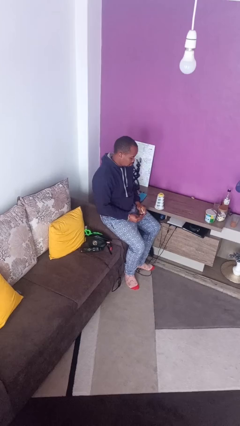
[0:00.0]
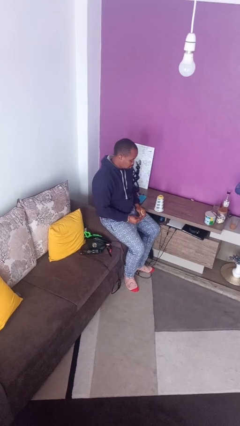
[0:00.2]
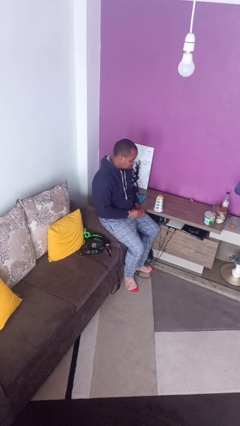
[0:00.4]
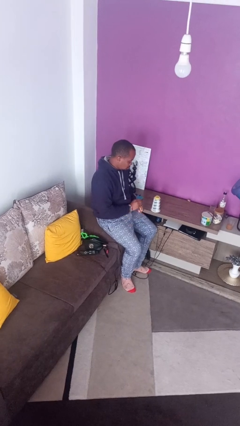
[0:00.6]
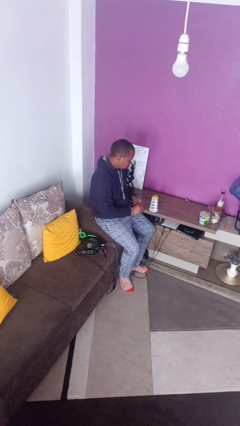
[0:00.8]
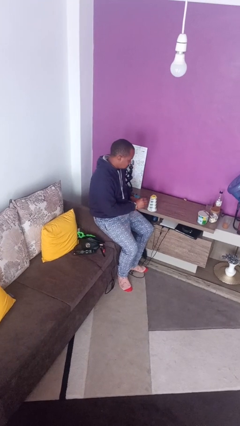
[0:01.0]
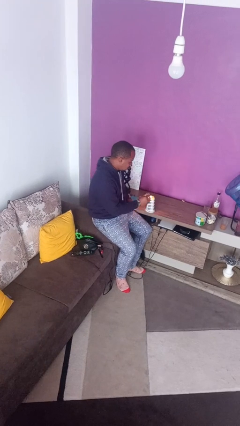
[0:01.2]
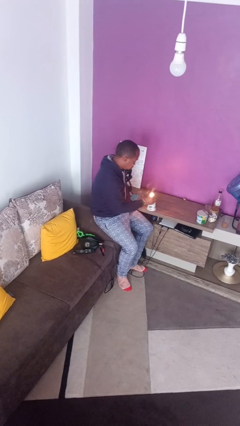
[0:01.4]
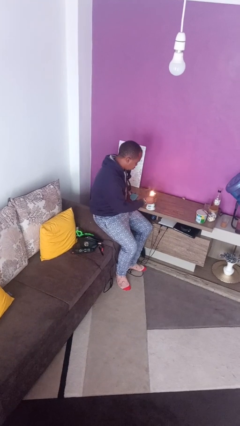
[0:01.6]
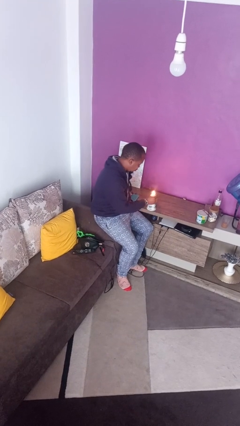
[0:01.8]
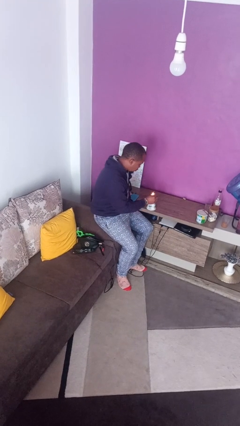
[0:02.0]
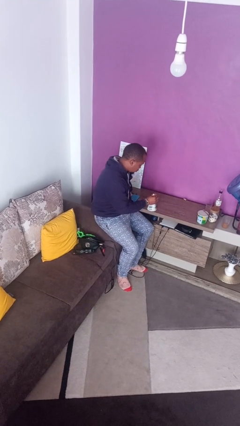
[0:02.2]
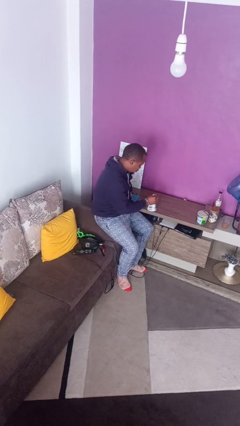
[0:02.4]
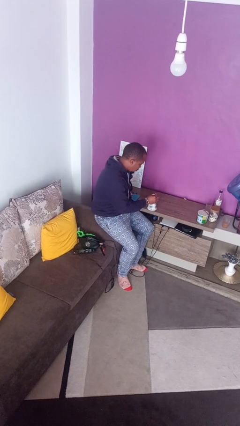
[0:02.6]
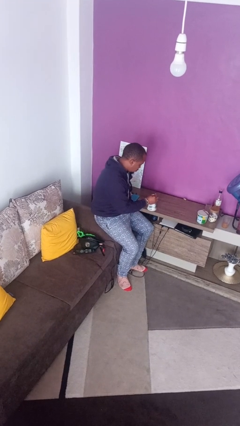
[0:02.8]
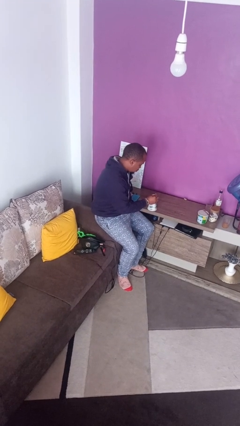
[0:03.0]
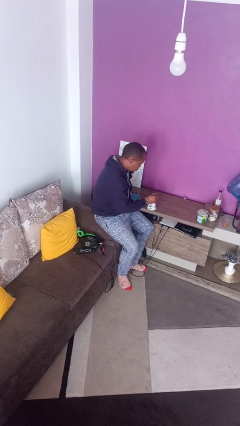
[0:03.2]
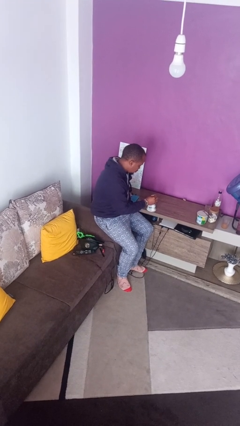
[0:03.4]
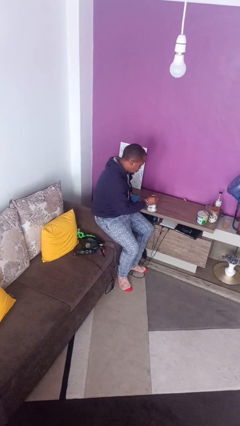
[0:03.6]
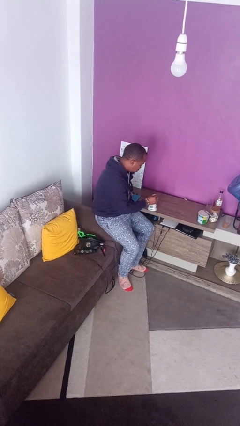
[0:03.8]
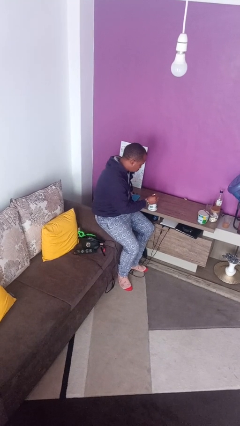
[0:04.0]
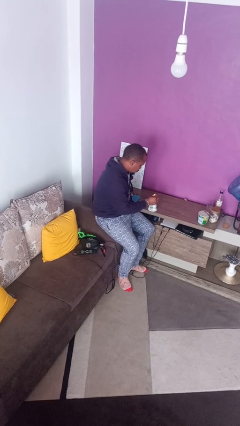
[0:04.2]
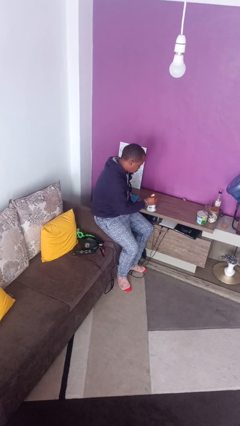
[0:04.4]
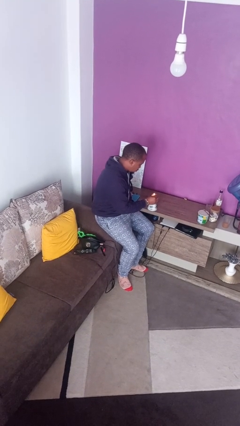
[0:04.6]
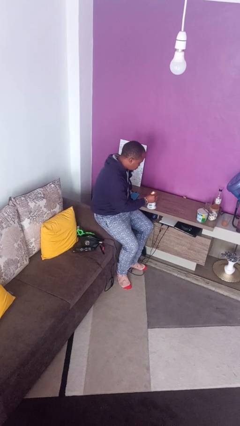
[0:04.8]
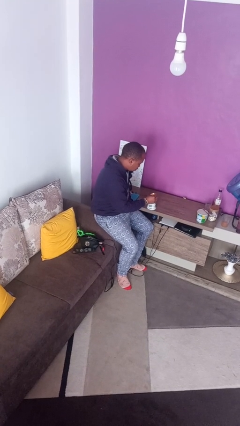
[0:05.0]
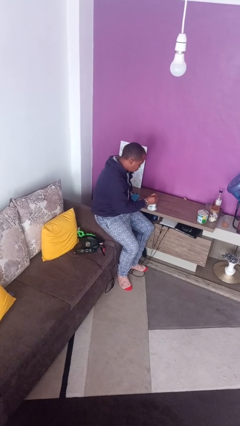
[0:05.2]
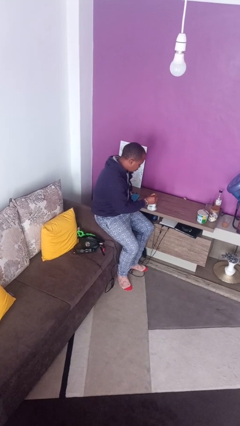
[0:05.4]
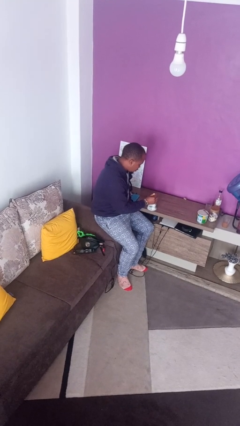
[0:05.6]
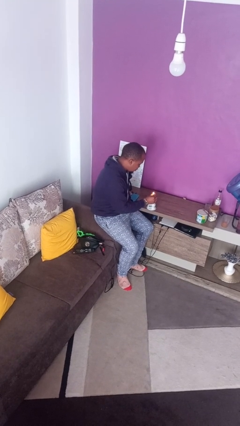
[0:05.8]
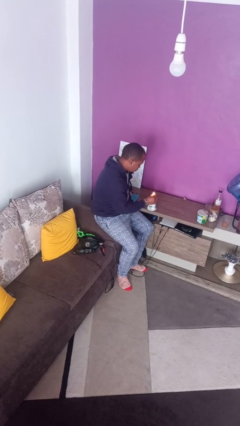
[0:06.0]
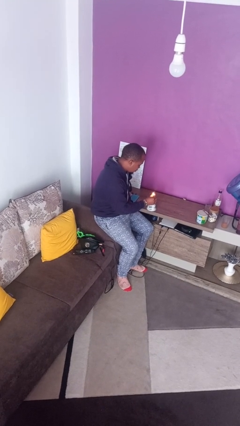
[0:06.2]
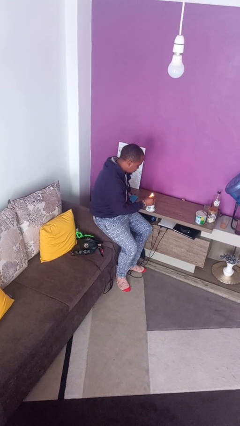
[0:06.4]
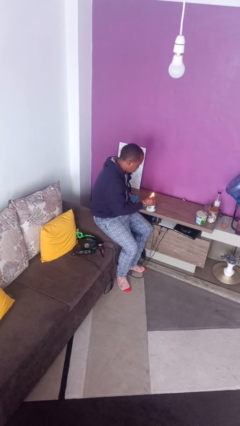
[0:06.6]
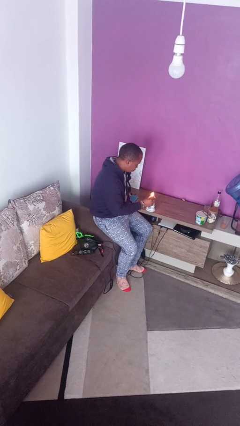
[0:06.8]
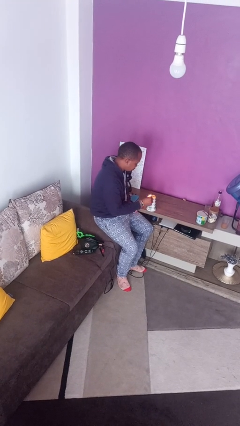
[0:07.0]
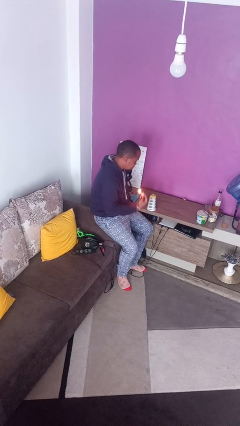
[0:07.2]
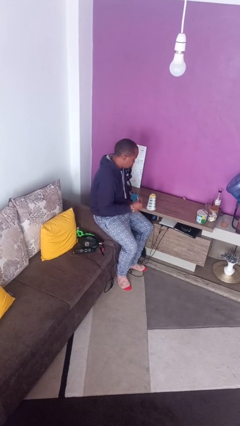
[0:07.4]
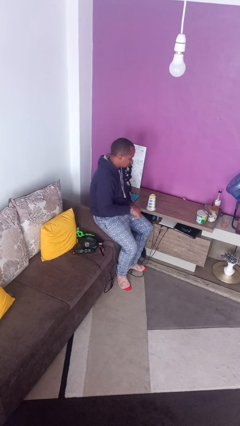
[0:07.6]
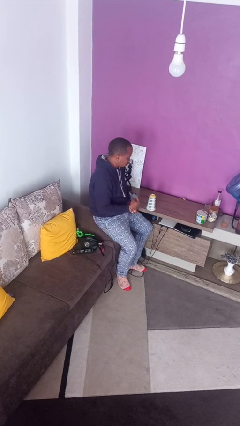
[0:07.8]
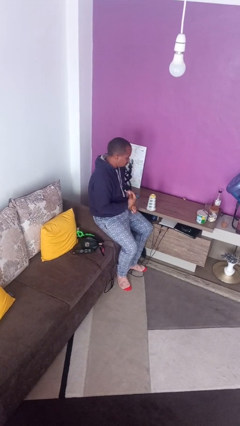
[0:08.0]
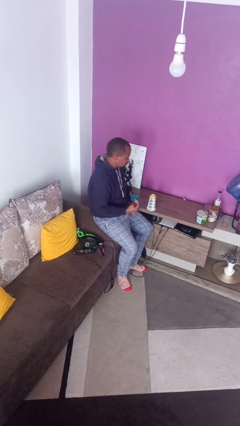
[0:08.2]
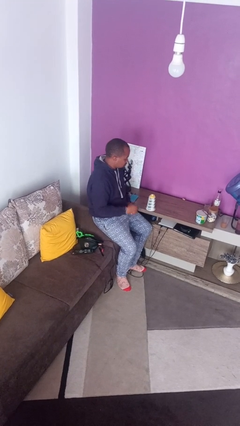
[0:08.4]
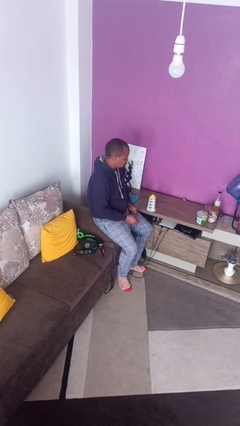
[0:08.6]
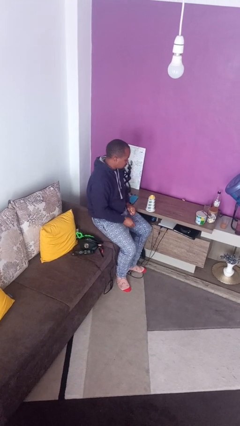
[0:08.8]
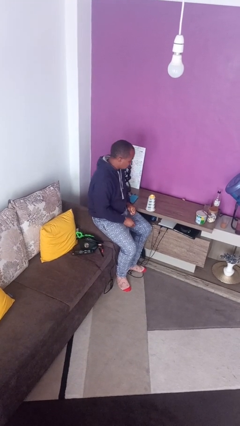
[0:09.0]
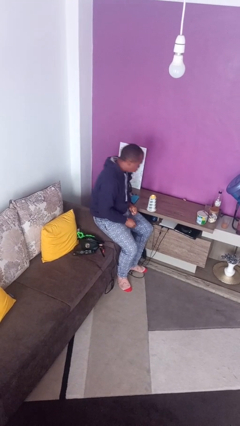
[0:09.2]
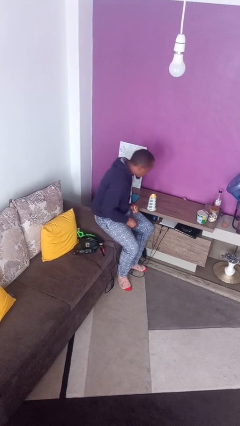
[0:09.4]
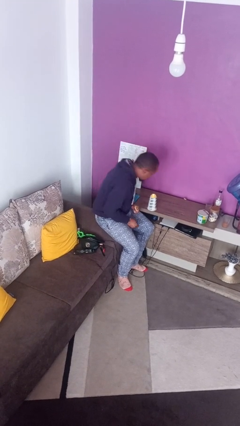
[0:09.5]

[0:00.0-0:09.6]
person lights candle

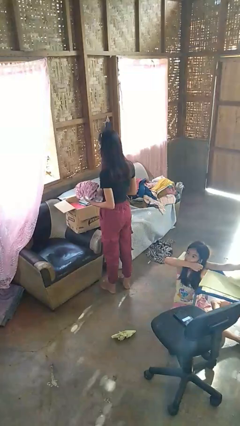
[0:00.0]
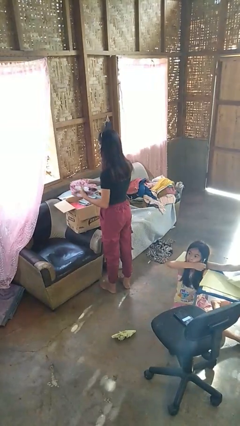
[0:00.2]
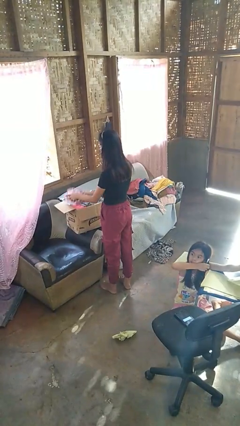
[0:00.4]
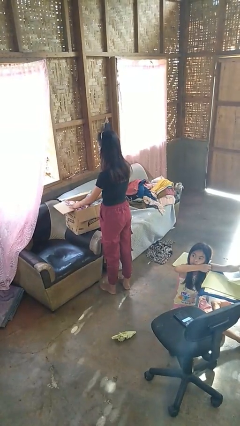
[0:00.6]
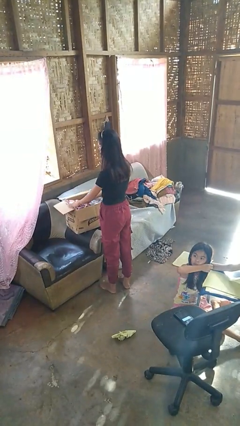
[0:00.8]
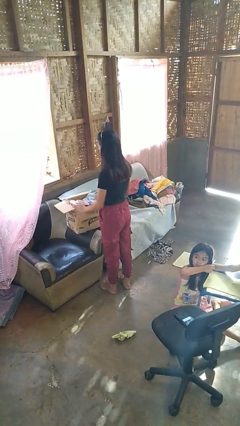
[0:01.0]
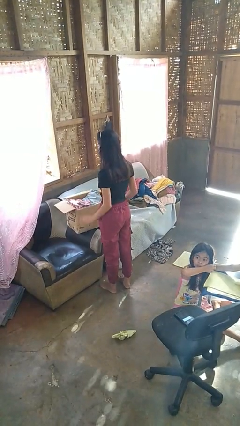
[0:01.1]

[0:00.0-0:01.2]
person puts object into box

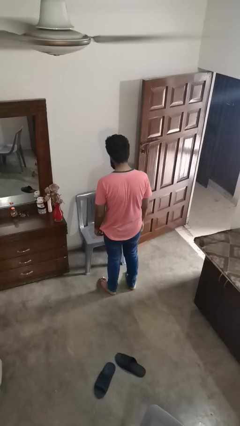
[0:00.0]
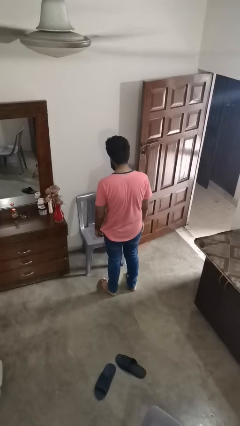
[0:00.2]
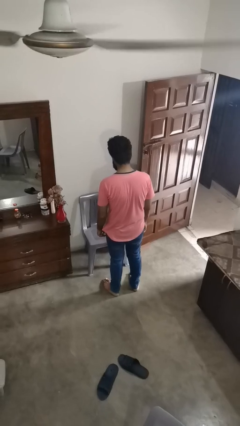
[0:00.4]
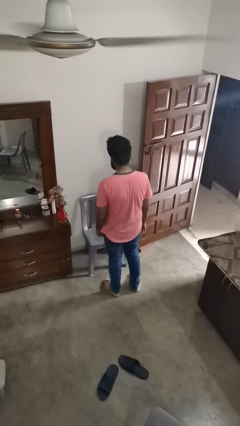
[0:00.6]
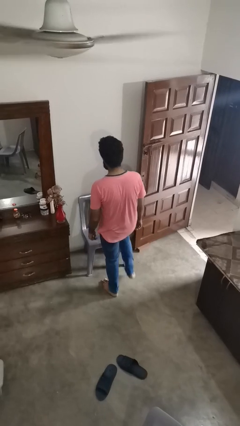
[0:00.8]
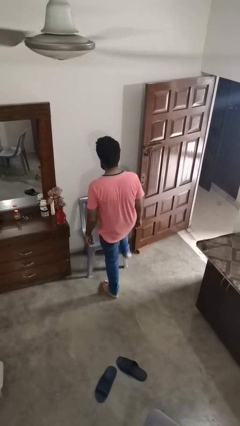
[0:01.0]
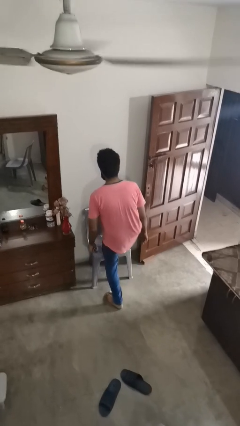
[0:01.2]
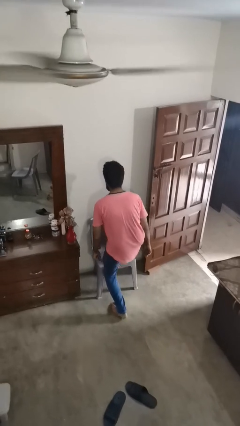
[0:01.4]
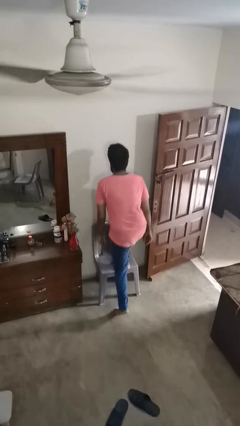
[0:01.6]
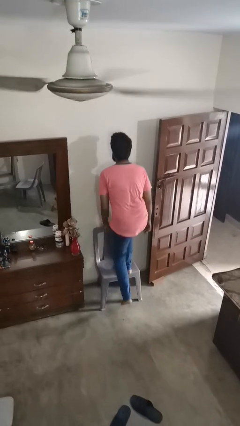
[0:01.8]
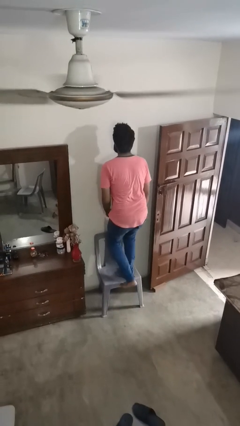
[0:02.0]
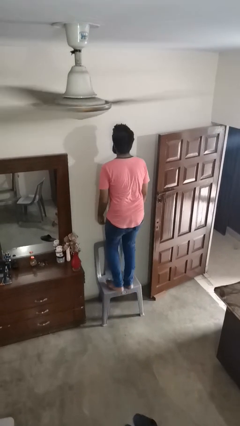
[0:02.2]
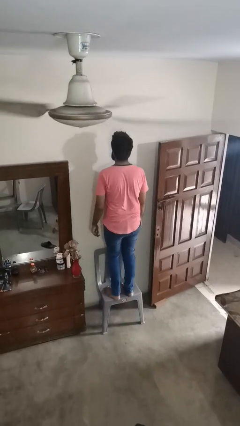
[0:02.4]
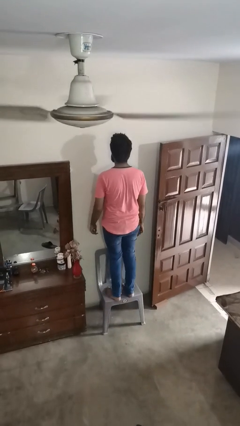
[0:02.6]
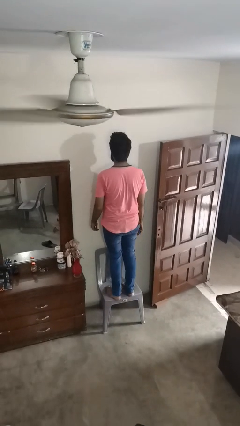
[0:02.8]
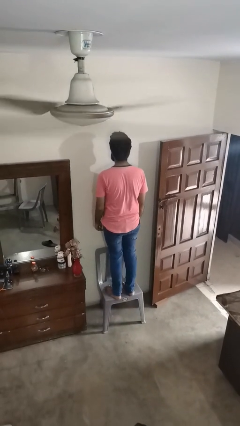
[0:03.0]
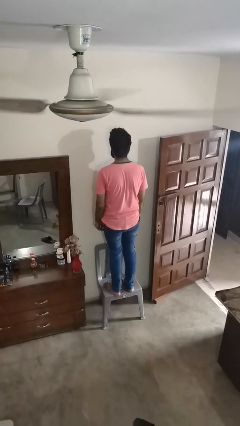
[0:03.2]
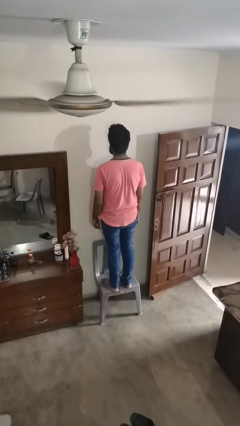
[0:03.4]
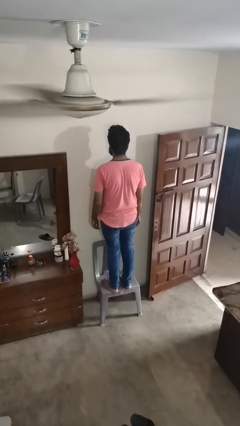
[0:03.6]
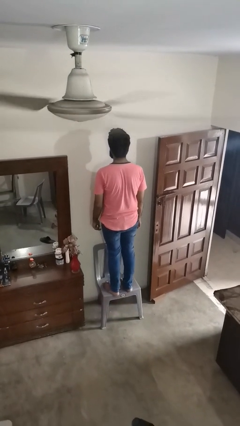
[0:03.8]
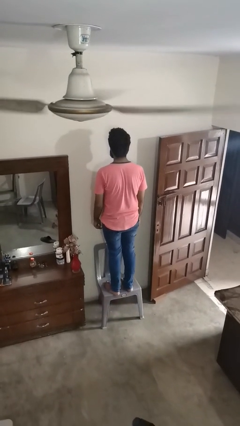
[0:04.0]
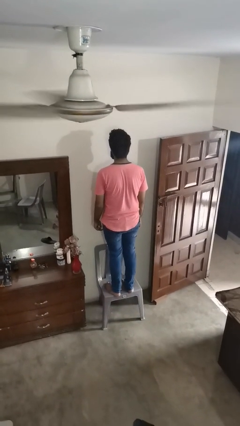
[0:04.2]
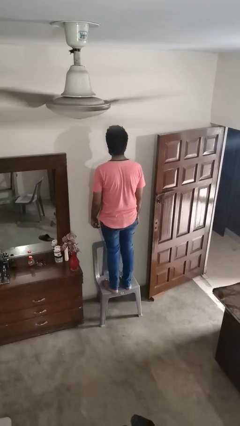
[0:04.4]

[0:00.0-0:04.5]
person climbs on chair

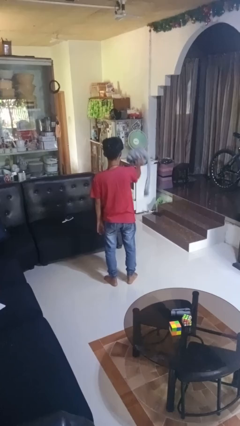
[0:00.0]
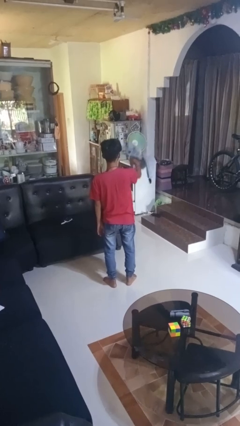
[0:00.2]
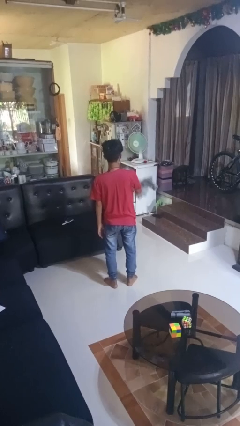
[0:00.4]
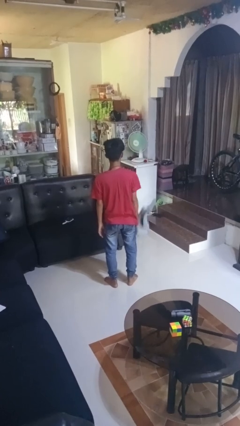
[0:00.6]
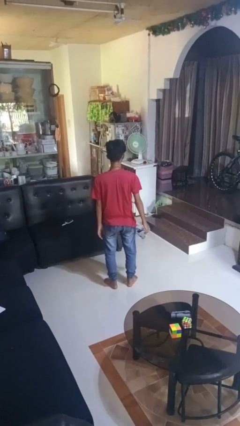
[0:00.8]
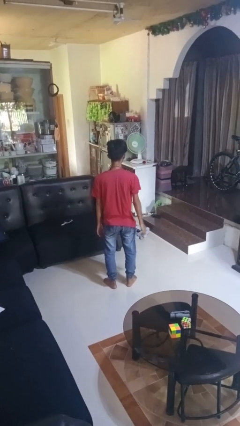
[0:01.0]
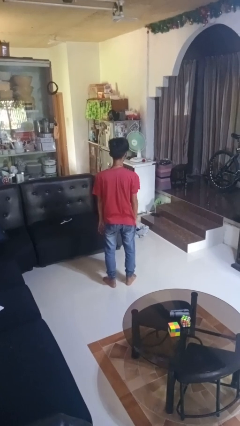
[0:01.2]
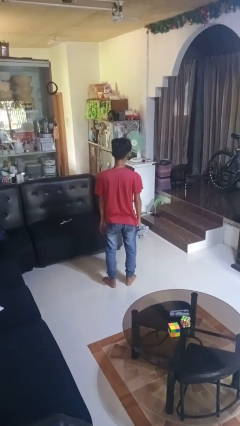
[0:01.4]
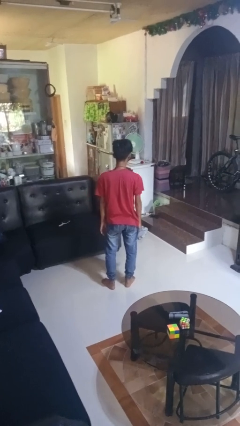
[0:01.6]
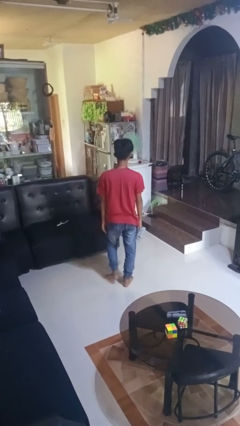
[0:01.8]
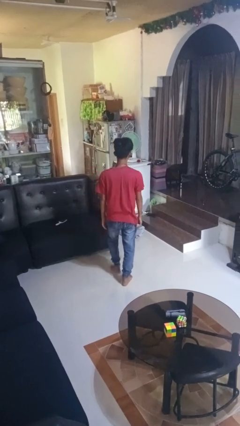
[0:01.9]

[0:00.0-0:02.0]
person throws object into air

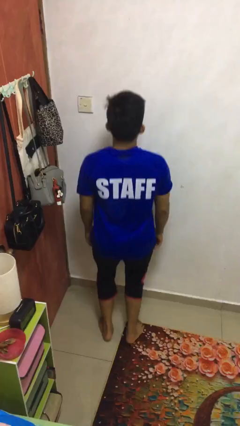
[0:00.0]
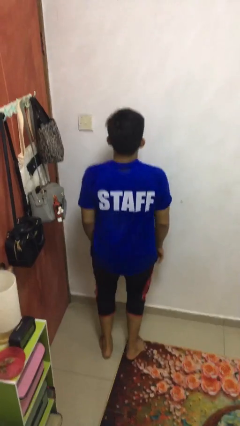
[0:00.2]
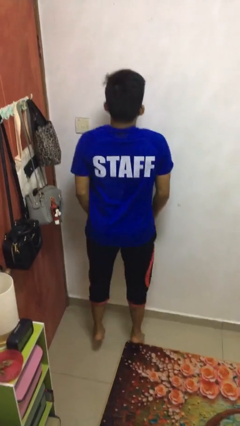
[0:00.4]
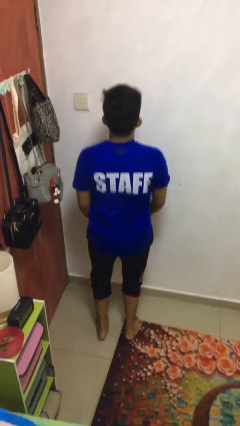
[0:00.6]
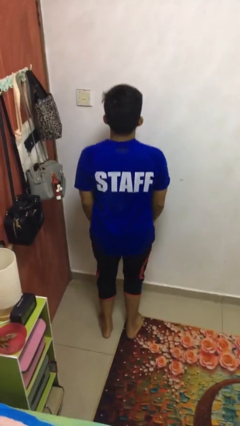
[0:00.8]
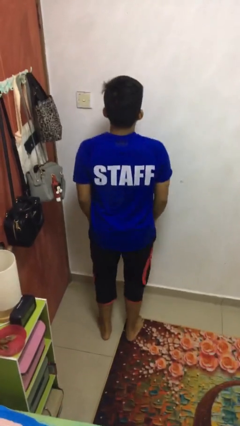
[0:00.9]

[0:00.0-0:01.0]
person jumps
